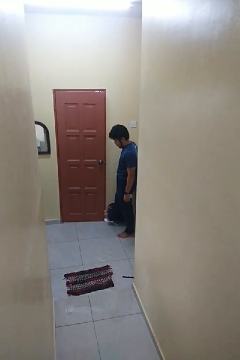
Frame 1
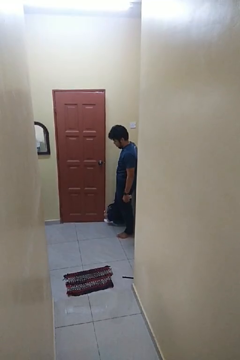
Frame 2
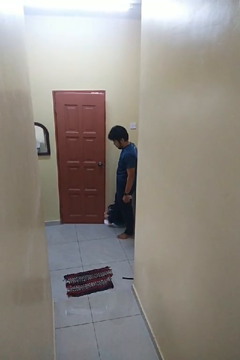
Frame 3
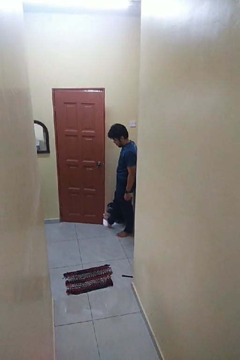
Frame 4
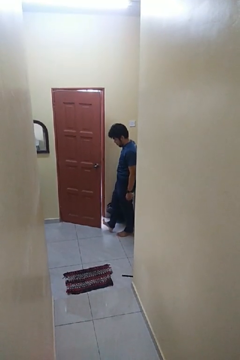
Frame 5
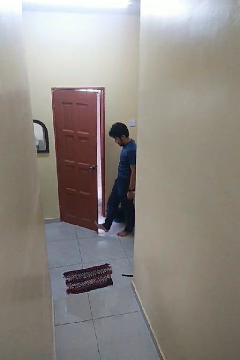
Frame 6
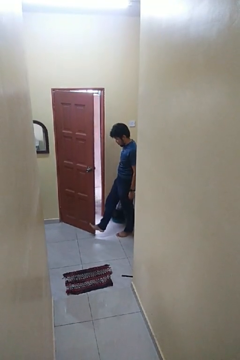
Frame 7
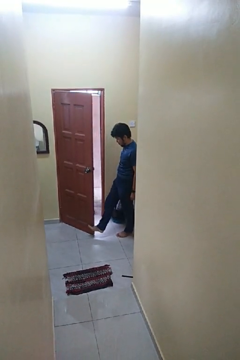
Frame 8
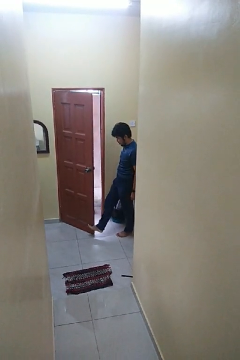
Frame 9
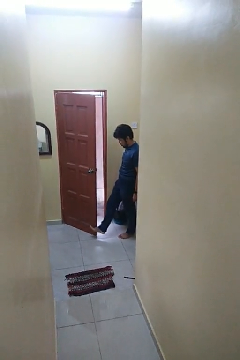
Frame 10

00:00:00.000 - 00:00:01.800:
person opens facility door

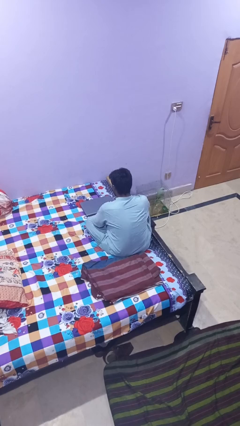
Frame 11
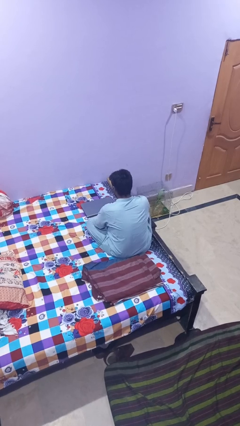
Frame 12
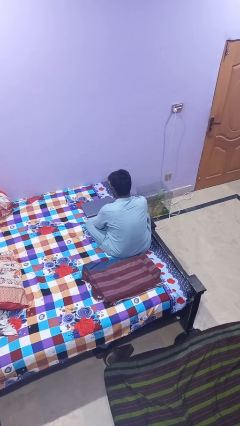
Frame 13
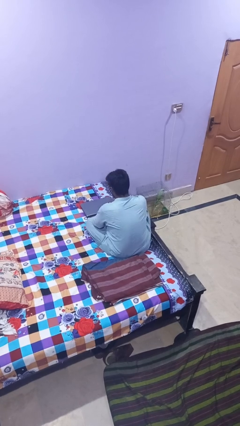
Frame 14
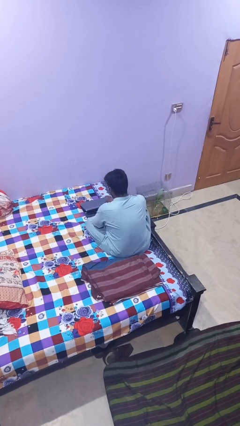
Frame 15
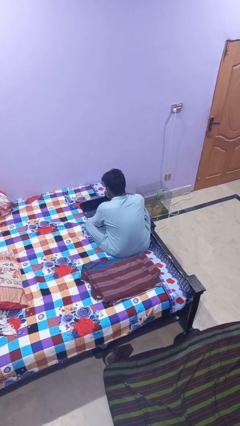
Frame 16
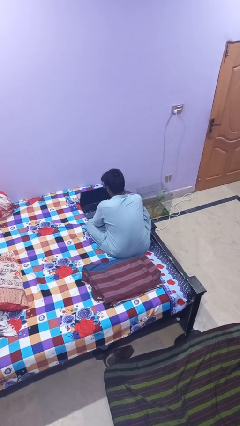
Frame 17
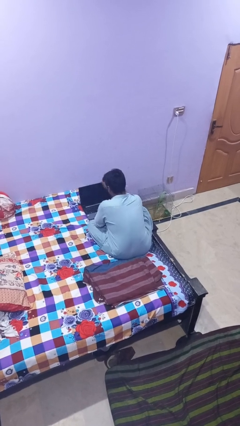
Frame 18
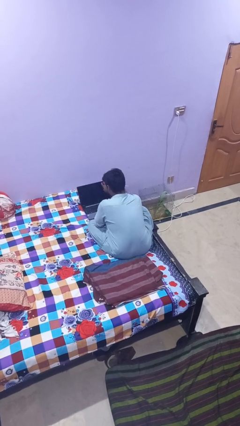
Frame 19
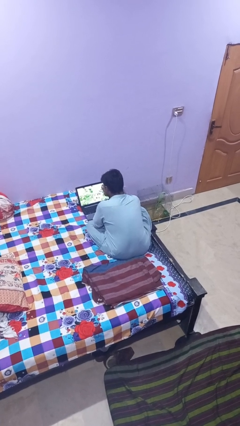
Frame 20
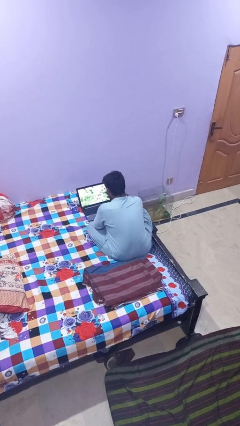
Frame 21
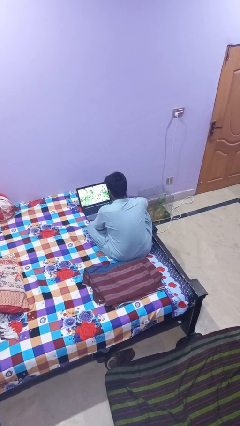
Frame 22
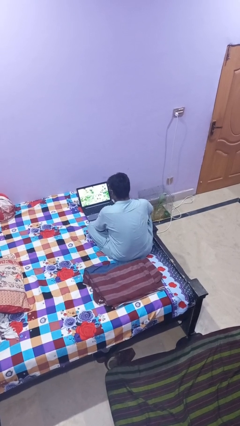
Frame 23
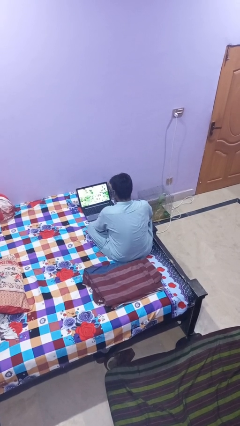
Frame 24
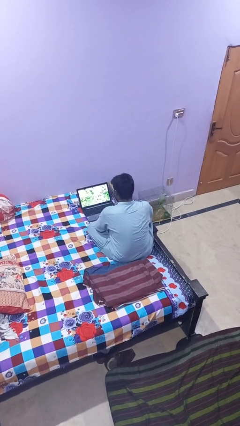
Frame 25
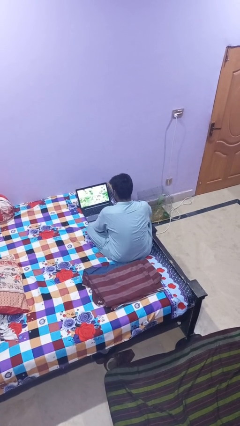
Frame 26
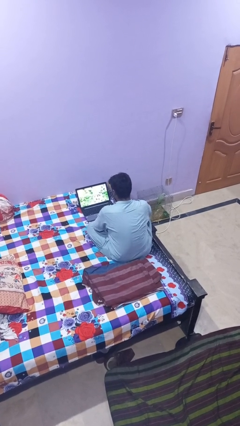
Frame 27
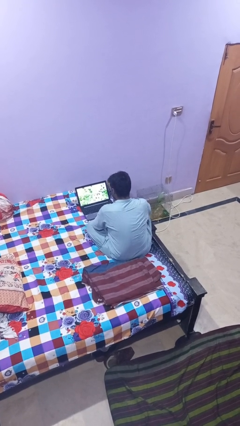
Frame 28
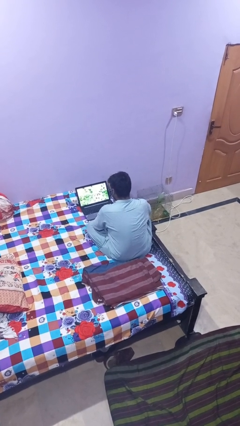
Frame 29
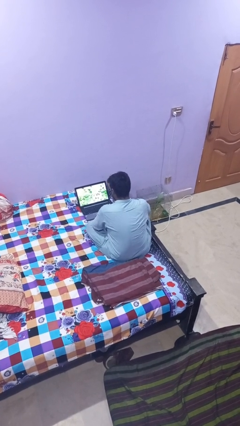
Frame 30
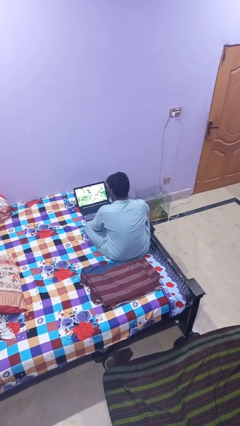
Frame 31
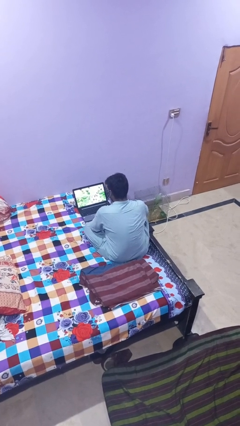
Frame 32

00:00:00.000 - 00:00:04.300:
person opens laptop

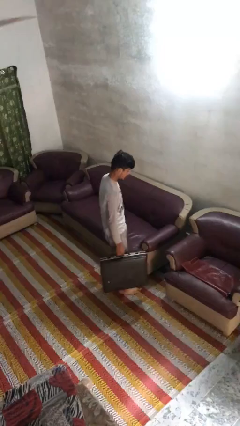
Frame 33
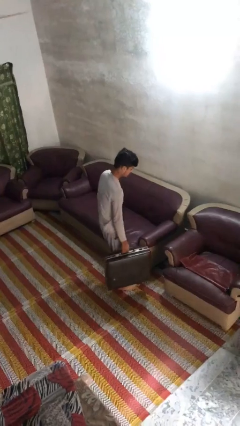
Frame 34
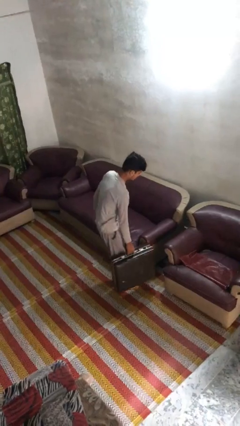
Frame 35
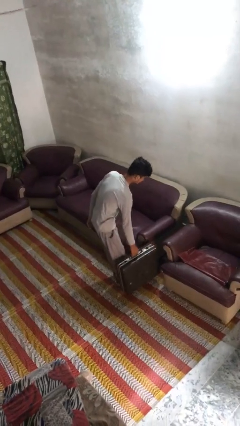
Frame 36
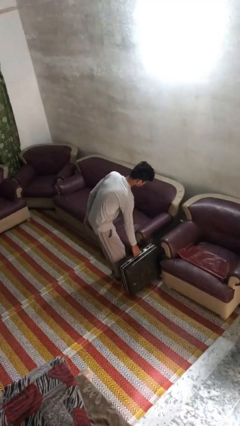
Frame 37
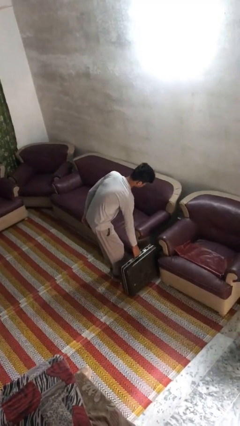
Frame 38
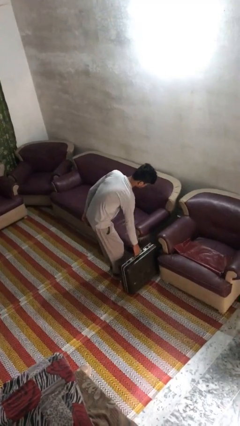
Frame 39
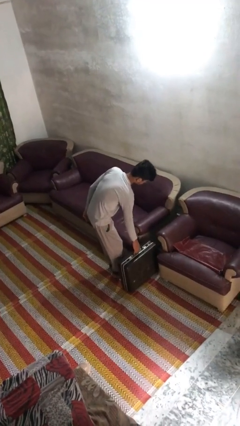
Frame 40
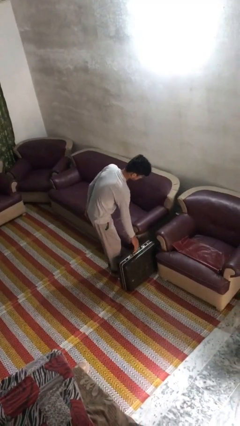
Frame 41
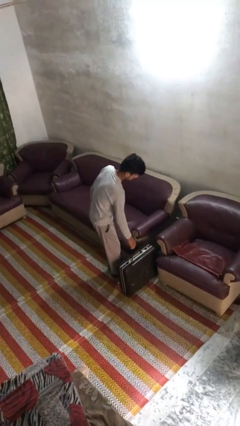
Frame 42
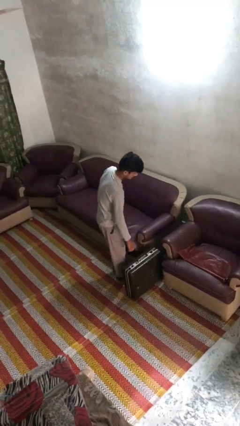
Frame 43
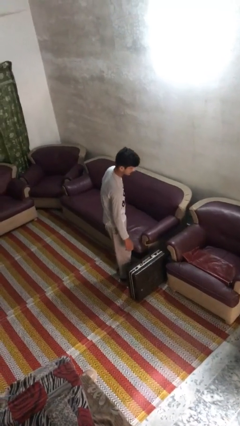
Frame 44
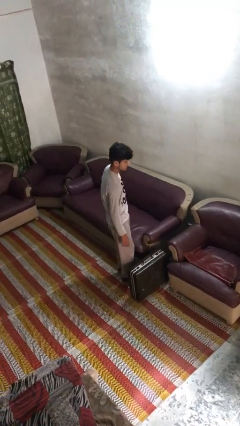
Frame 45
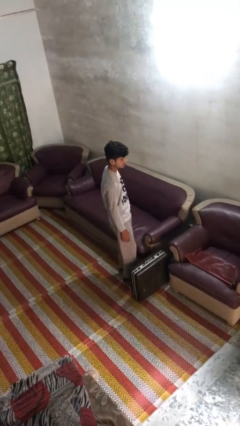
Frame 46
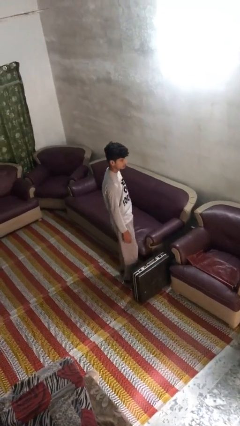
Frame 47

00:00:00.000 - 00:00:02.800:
person puts down object on floor

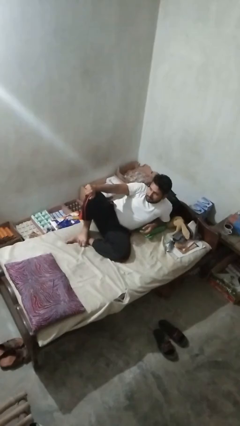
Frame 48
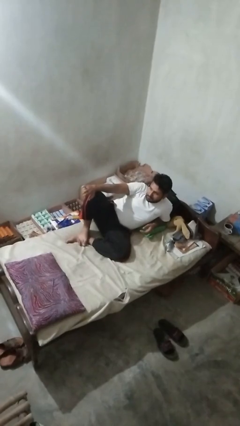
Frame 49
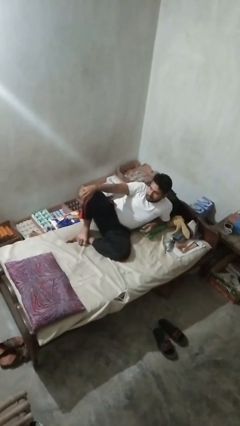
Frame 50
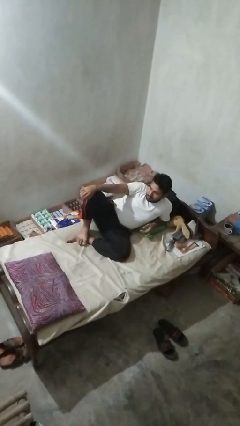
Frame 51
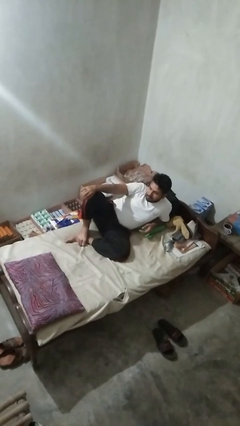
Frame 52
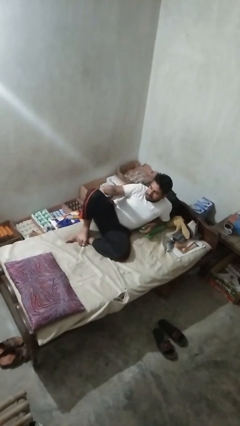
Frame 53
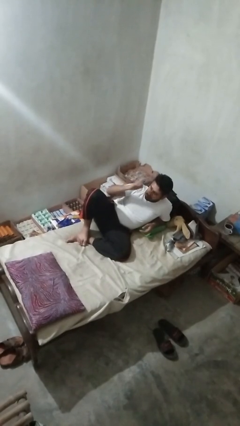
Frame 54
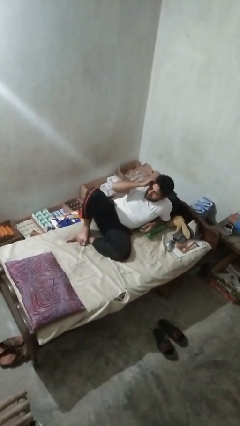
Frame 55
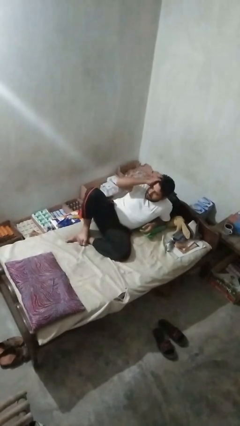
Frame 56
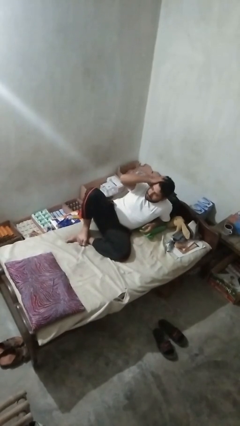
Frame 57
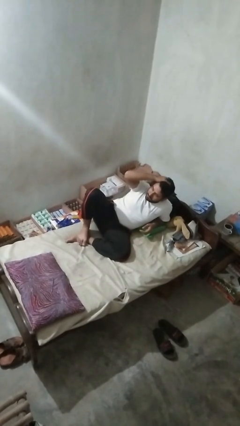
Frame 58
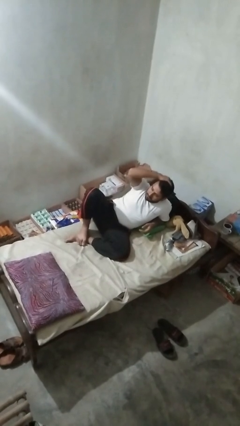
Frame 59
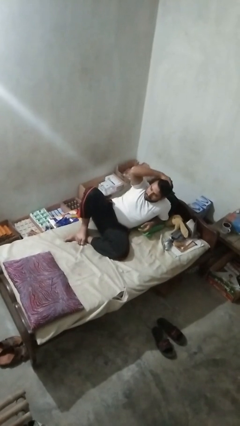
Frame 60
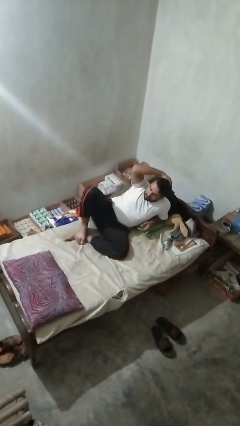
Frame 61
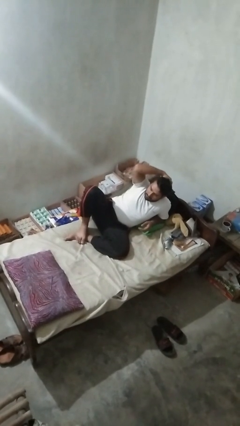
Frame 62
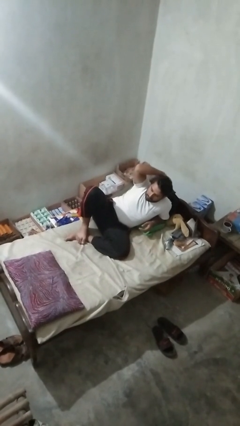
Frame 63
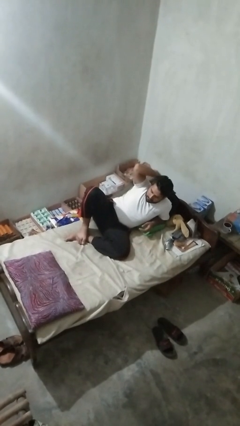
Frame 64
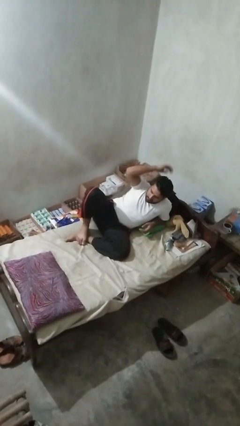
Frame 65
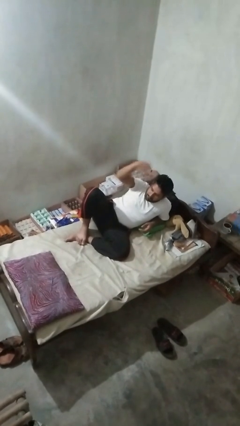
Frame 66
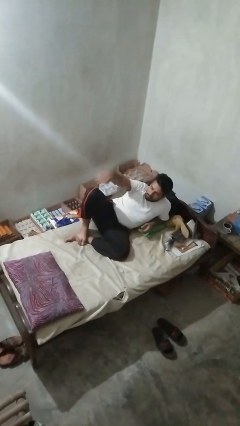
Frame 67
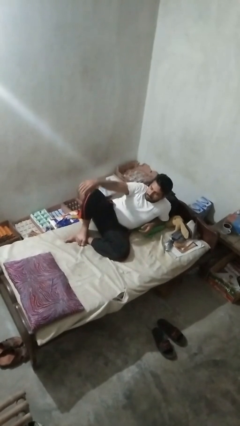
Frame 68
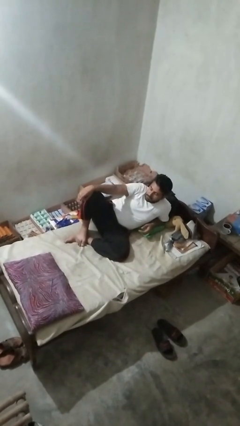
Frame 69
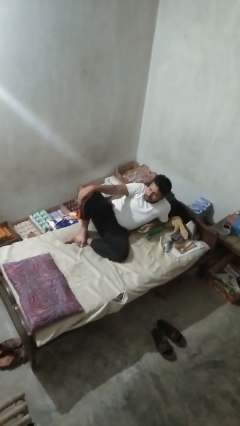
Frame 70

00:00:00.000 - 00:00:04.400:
person strokes hair

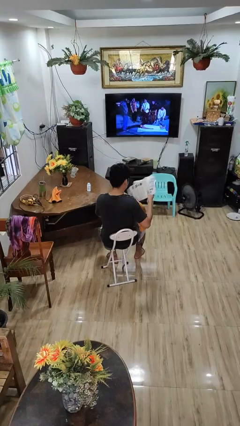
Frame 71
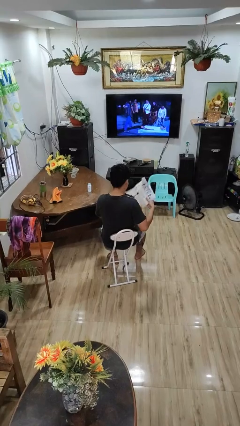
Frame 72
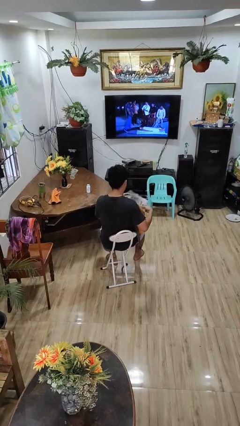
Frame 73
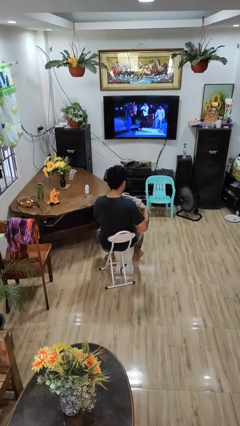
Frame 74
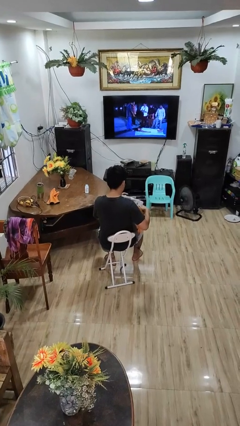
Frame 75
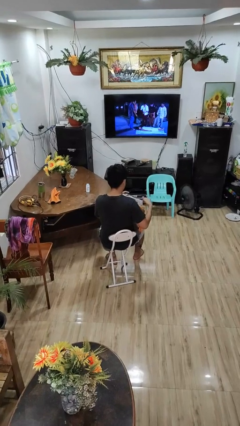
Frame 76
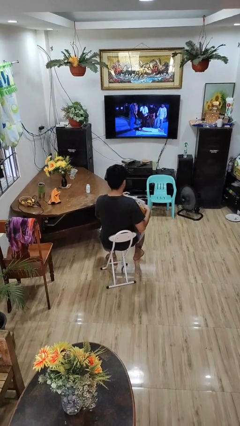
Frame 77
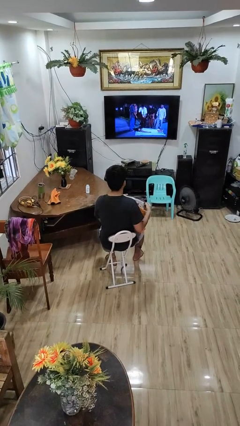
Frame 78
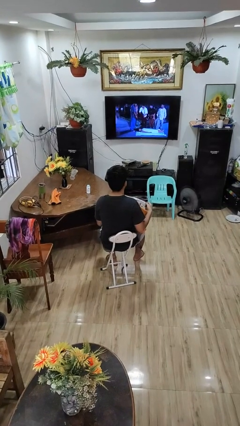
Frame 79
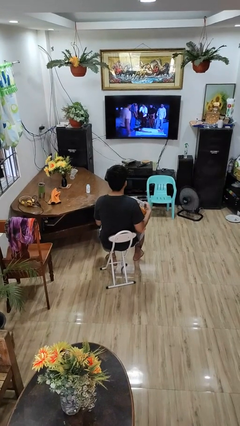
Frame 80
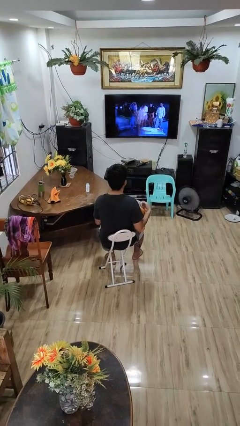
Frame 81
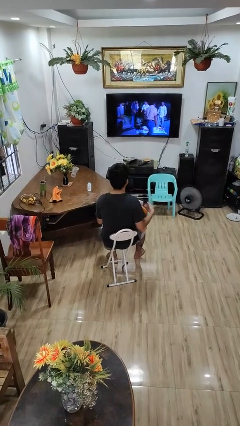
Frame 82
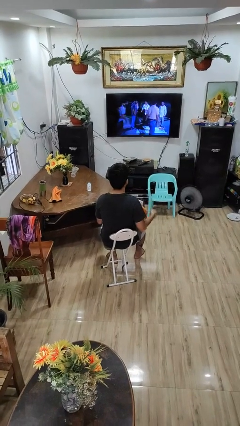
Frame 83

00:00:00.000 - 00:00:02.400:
person puts object into backpack

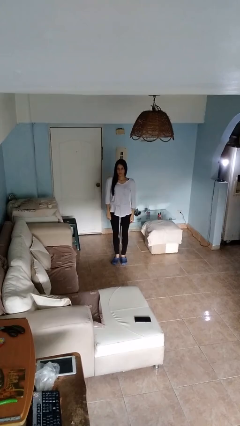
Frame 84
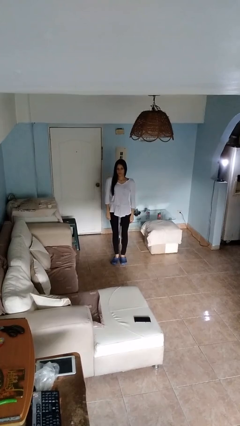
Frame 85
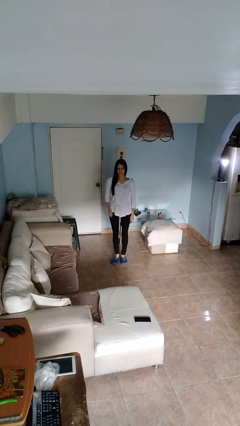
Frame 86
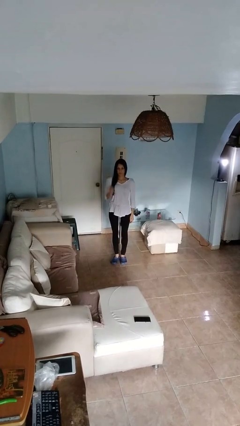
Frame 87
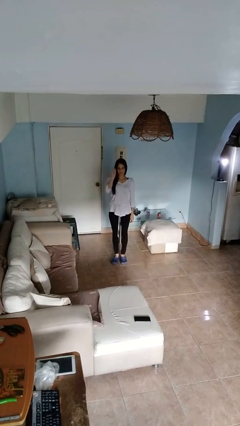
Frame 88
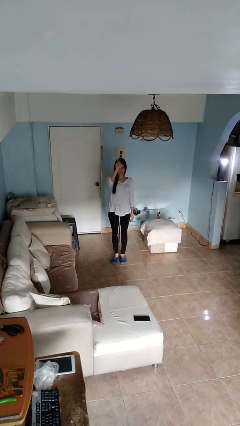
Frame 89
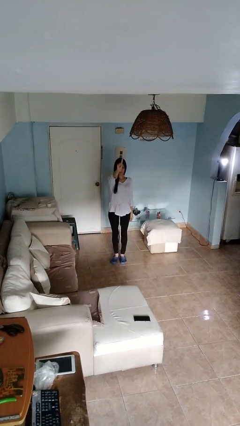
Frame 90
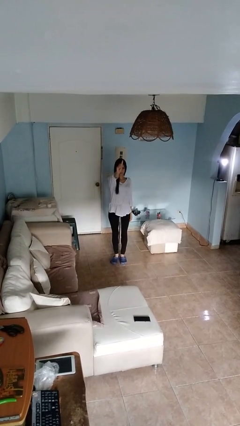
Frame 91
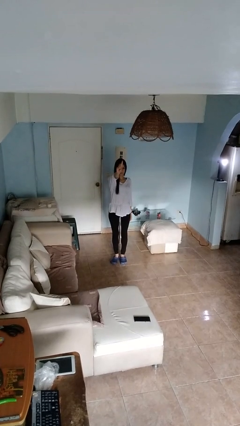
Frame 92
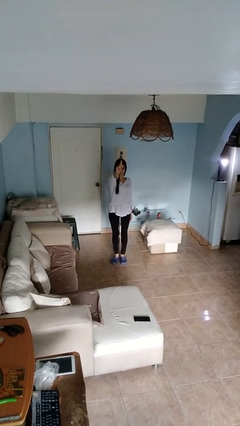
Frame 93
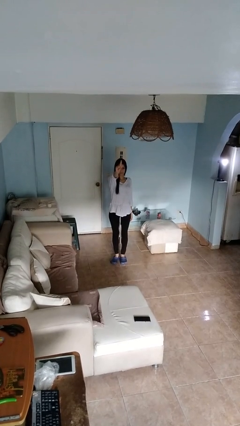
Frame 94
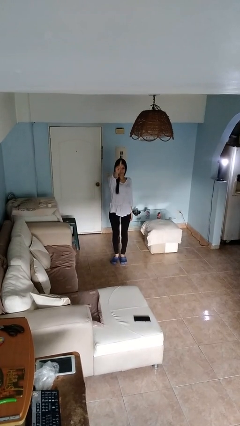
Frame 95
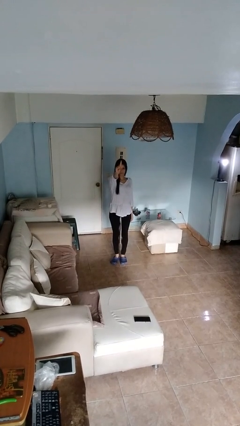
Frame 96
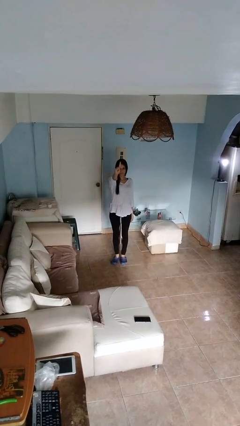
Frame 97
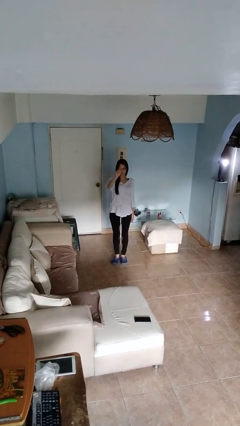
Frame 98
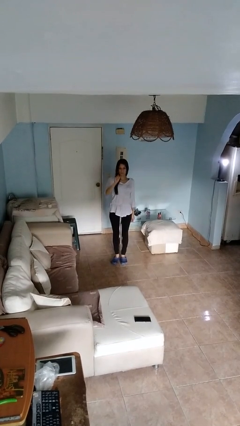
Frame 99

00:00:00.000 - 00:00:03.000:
person gestures number one
